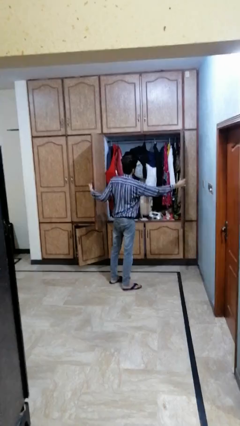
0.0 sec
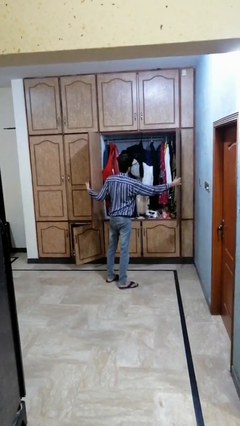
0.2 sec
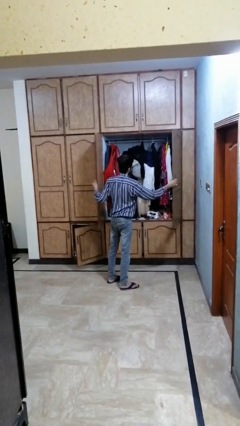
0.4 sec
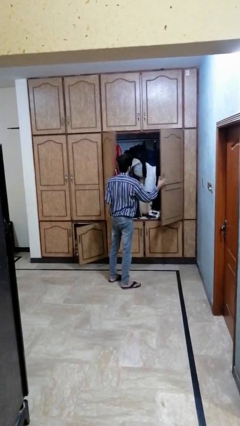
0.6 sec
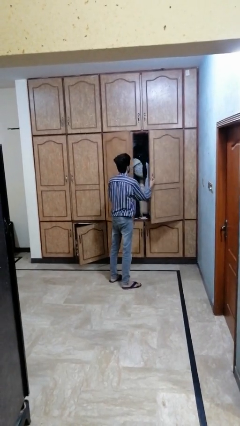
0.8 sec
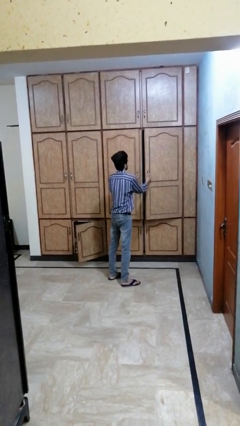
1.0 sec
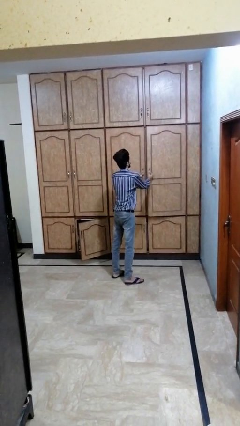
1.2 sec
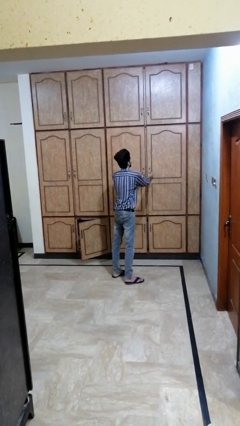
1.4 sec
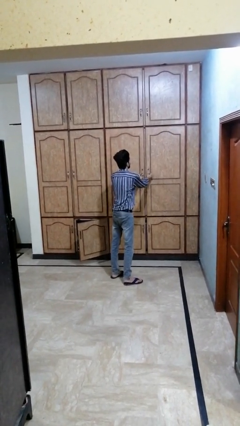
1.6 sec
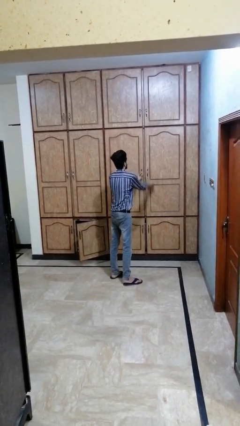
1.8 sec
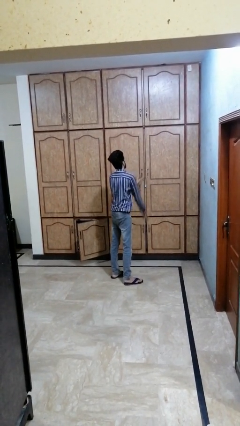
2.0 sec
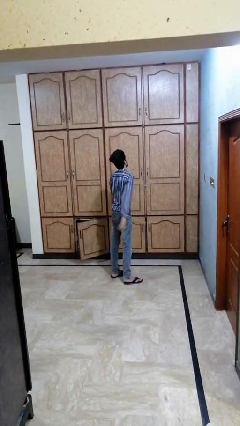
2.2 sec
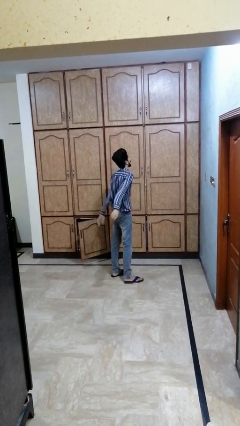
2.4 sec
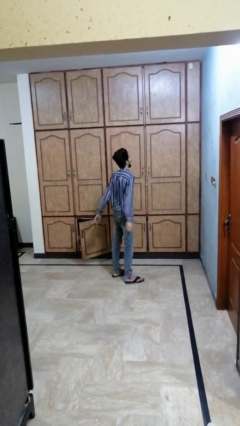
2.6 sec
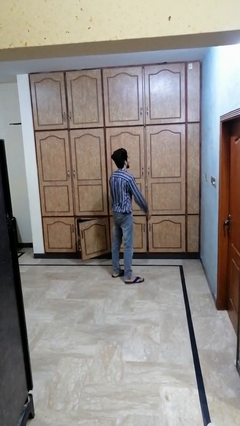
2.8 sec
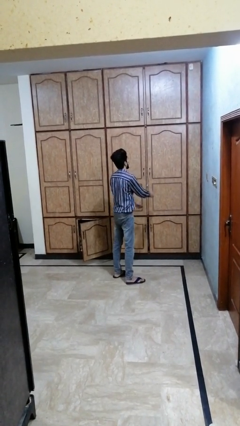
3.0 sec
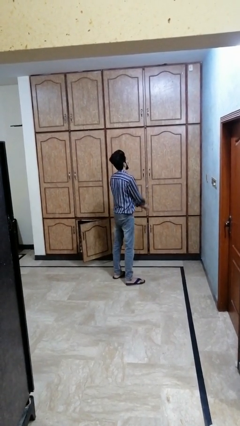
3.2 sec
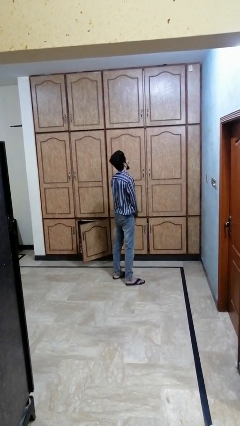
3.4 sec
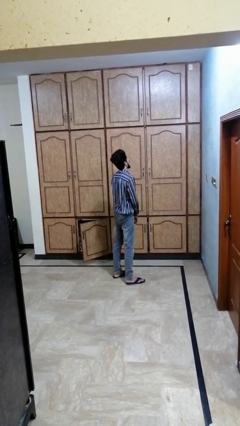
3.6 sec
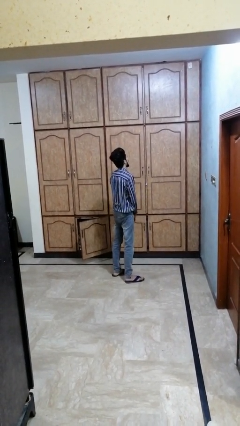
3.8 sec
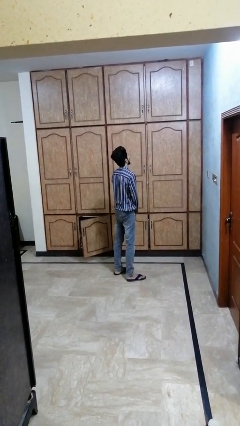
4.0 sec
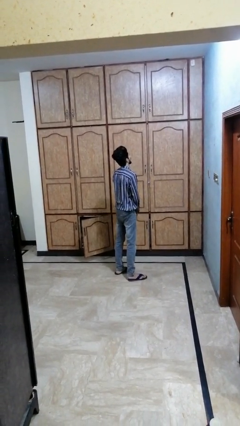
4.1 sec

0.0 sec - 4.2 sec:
person closes dresser drawer

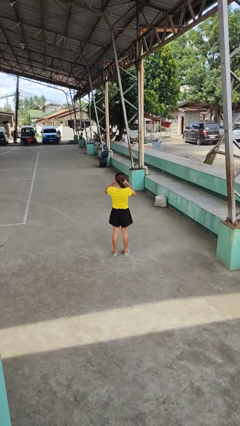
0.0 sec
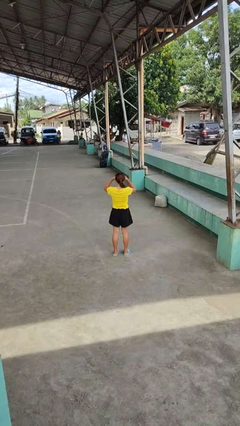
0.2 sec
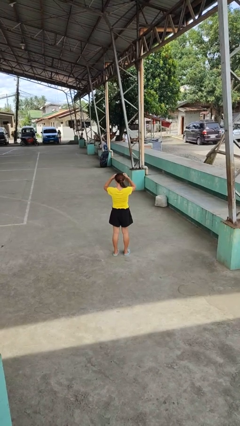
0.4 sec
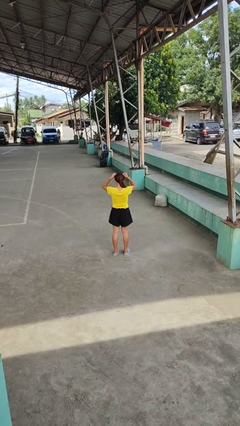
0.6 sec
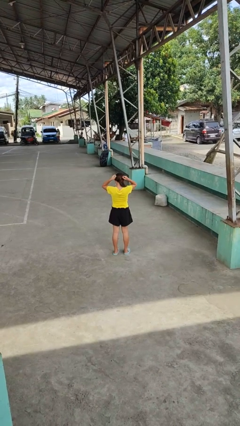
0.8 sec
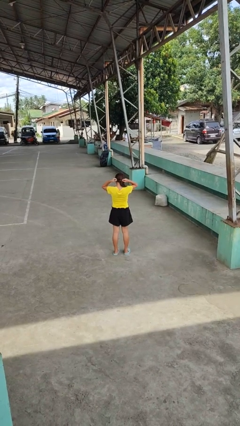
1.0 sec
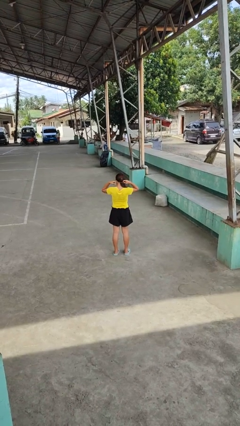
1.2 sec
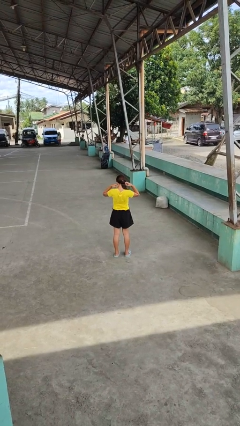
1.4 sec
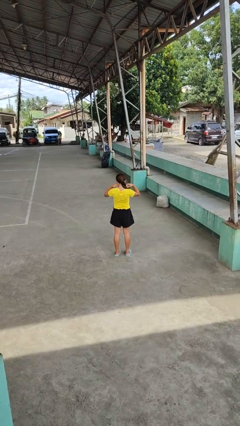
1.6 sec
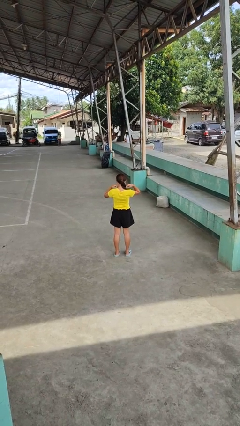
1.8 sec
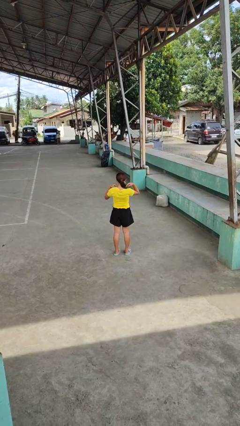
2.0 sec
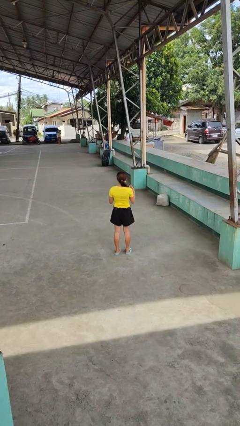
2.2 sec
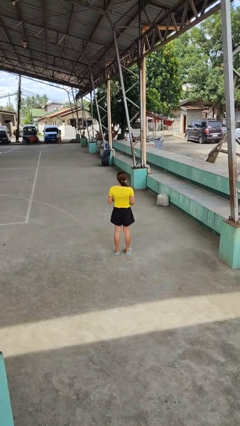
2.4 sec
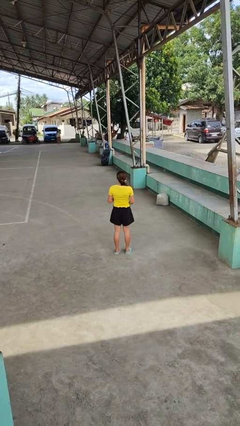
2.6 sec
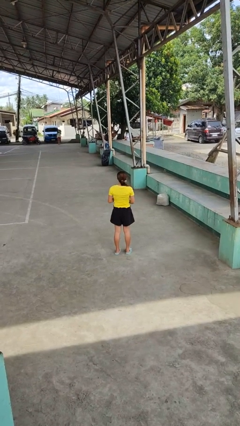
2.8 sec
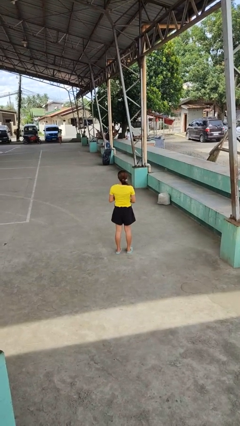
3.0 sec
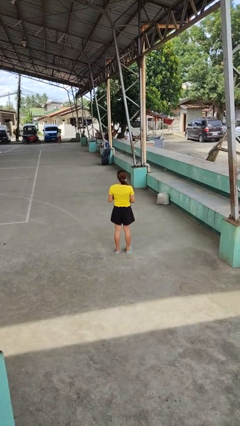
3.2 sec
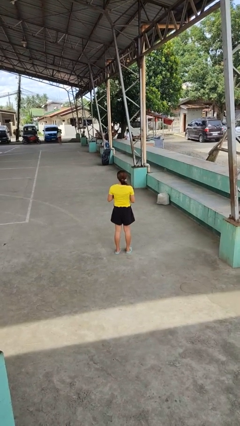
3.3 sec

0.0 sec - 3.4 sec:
person puts on necklace

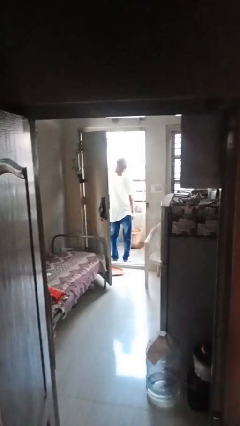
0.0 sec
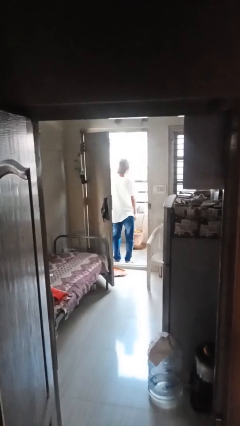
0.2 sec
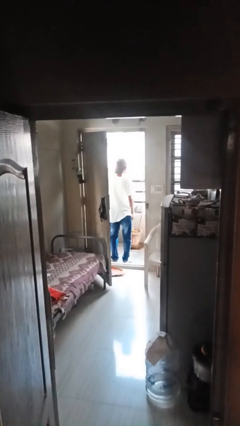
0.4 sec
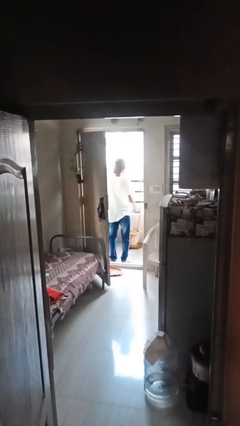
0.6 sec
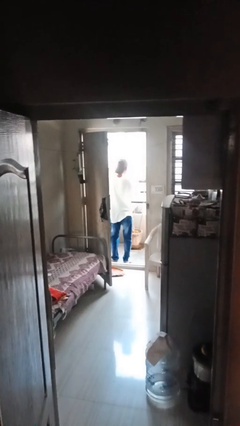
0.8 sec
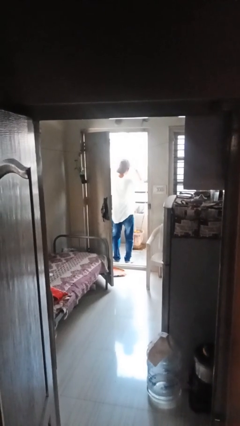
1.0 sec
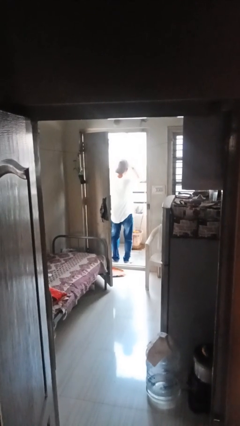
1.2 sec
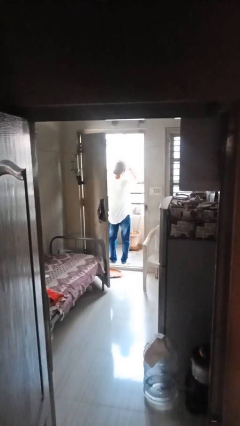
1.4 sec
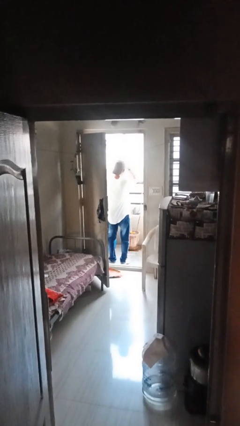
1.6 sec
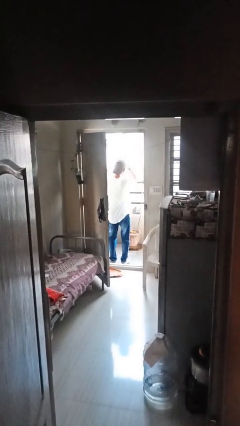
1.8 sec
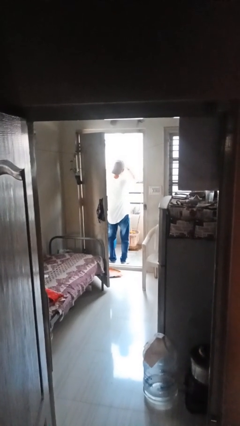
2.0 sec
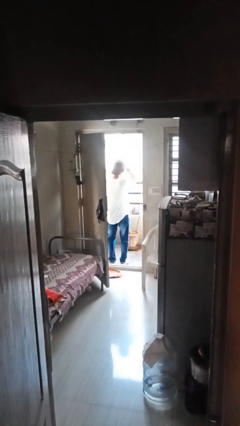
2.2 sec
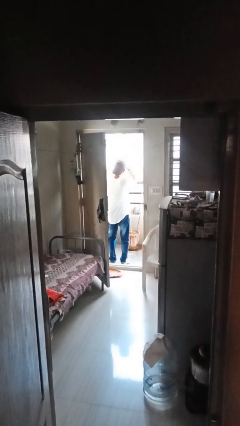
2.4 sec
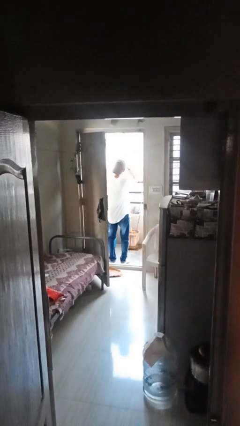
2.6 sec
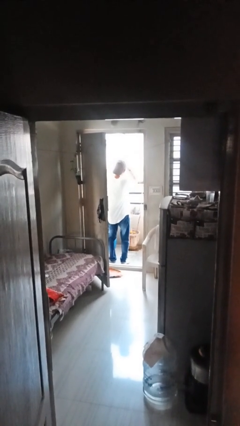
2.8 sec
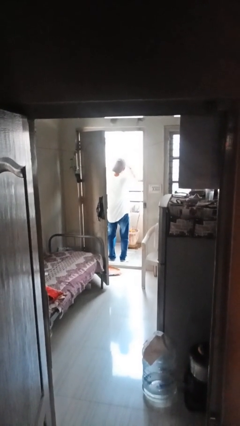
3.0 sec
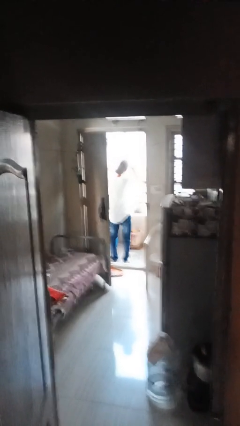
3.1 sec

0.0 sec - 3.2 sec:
person shades eyes

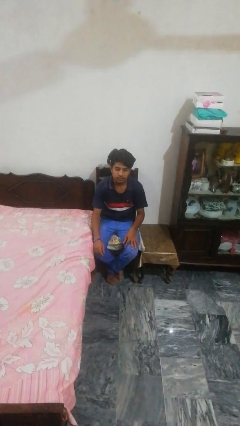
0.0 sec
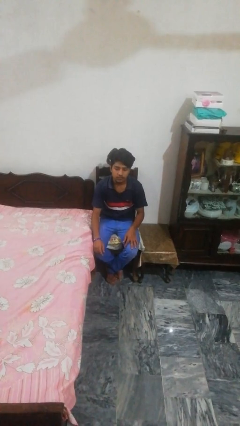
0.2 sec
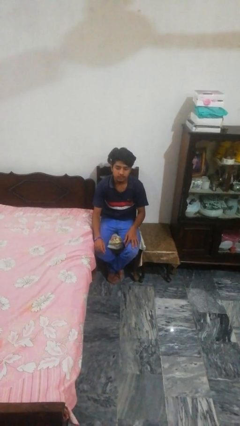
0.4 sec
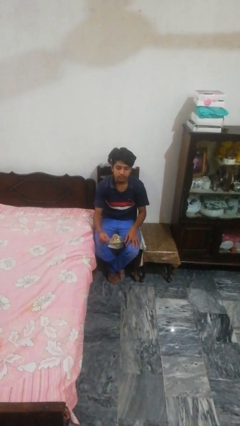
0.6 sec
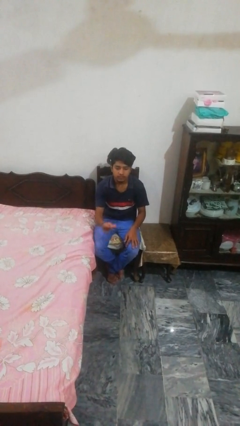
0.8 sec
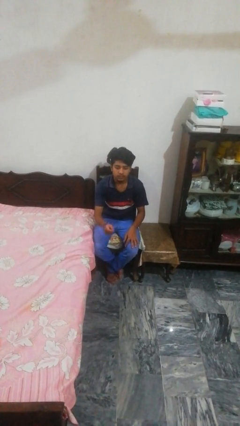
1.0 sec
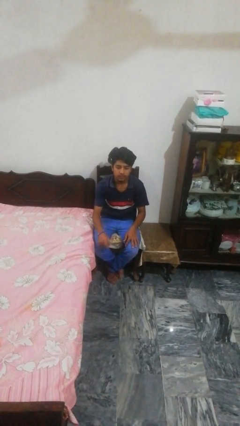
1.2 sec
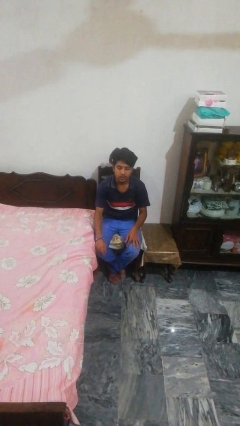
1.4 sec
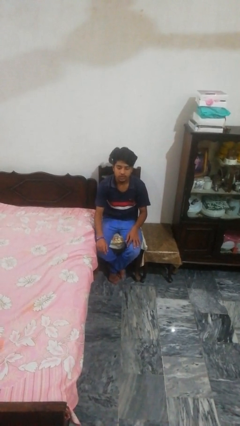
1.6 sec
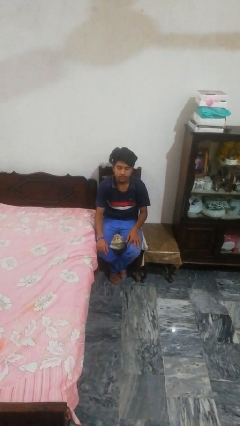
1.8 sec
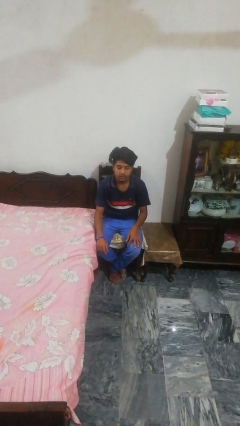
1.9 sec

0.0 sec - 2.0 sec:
person snaps fingers

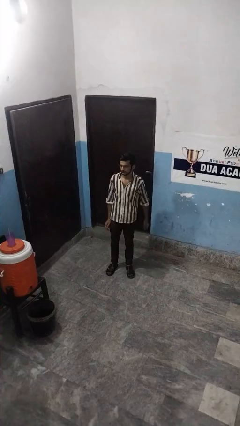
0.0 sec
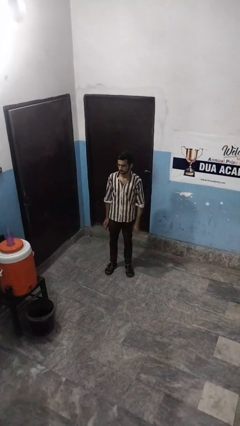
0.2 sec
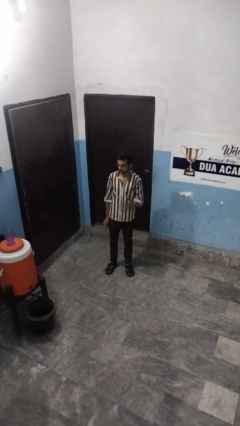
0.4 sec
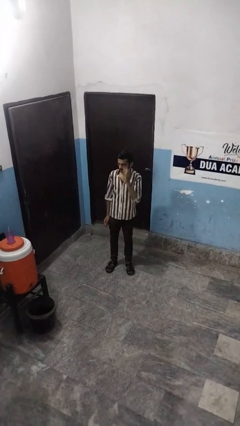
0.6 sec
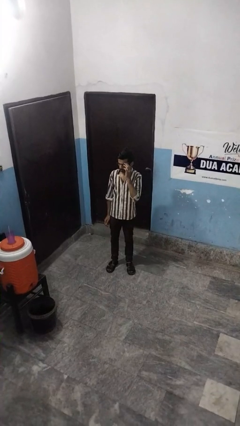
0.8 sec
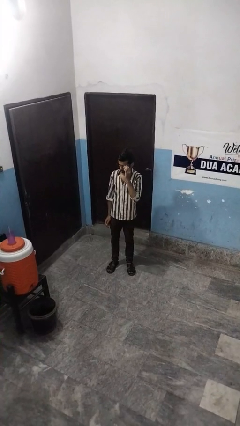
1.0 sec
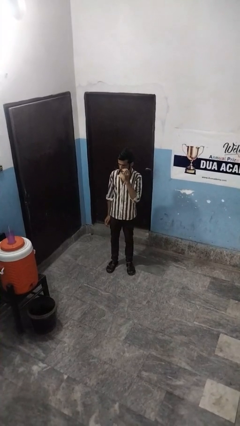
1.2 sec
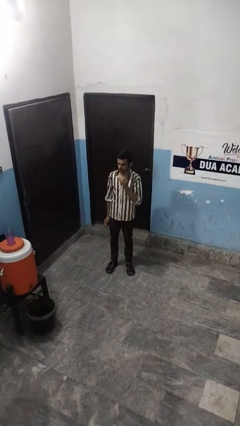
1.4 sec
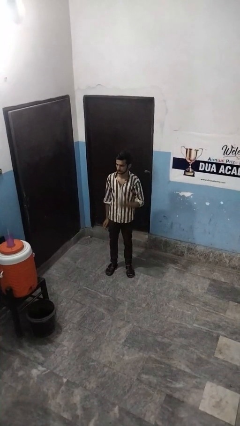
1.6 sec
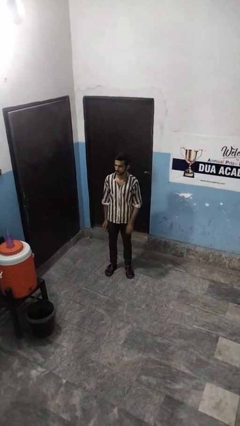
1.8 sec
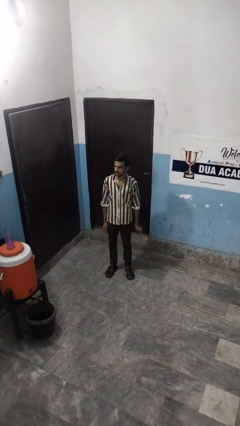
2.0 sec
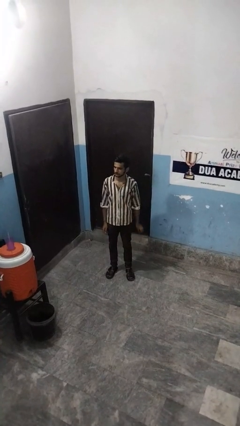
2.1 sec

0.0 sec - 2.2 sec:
person takes off glasses

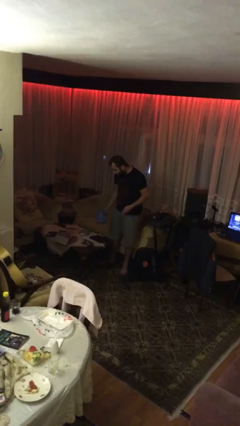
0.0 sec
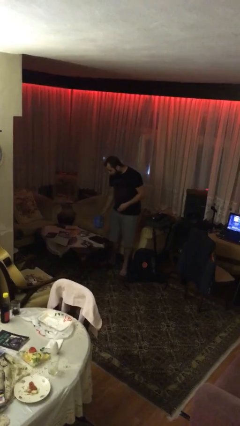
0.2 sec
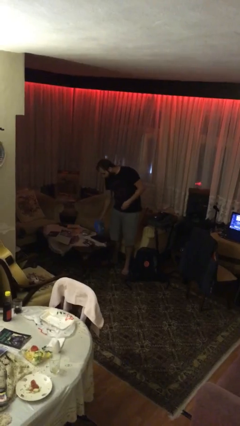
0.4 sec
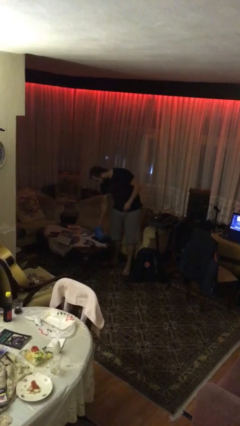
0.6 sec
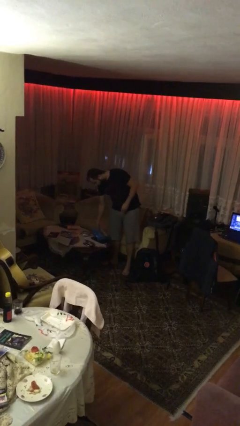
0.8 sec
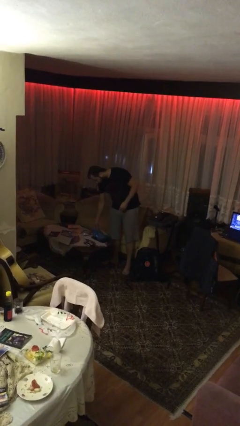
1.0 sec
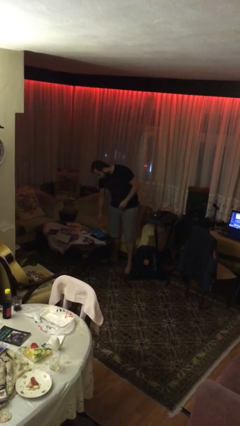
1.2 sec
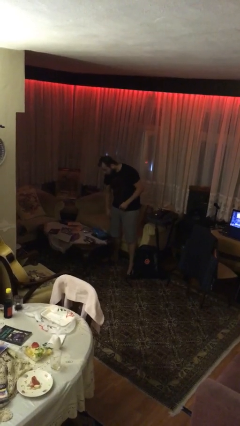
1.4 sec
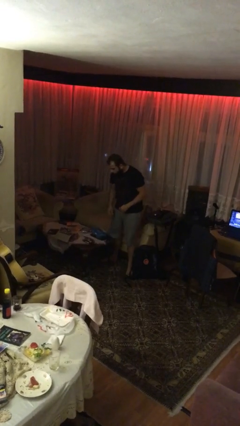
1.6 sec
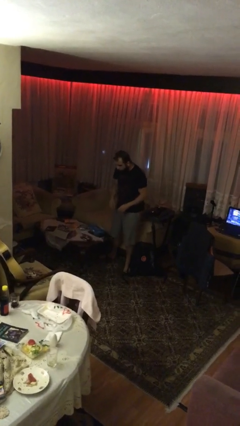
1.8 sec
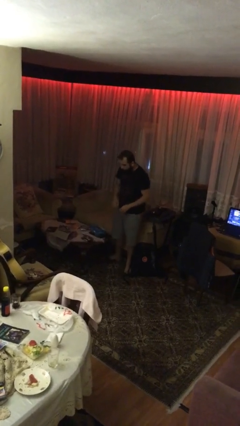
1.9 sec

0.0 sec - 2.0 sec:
person puts down object on table

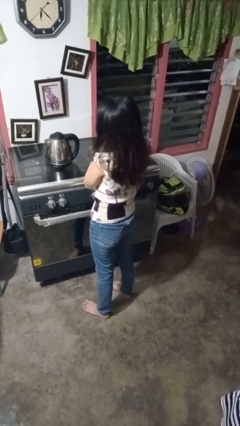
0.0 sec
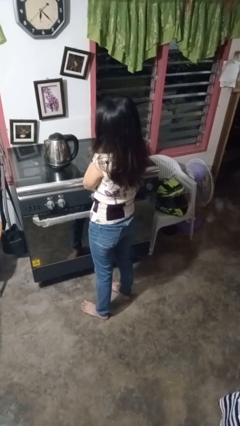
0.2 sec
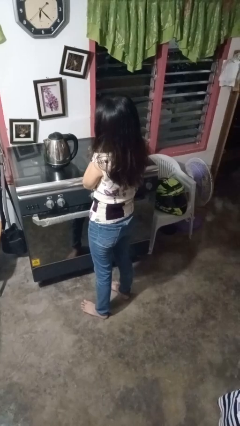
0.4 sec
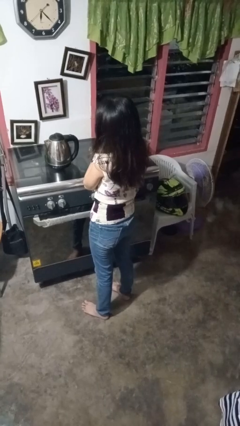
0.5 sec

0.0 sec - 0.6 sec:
person takes off hoodie
